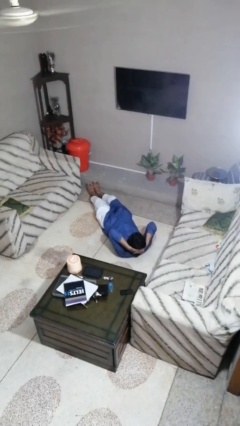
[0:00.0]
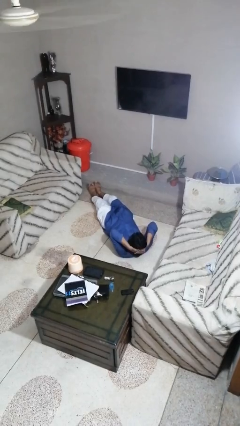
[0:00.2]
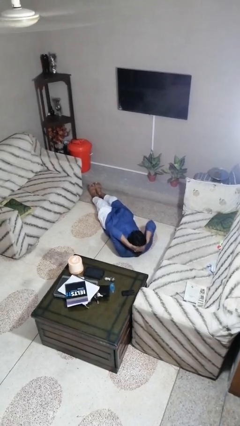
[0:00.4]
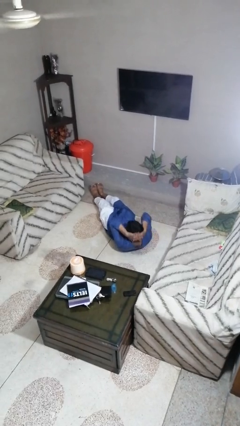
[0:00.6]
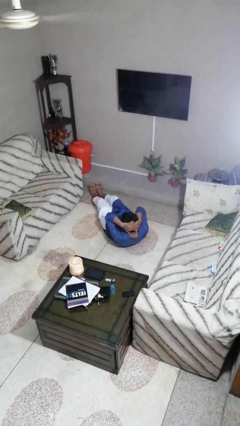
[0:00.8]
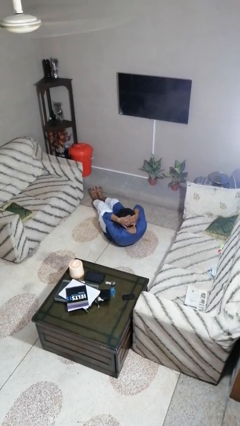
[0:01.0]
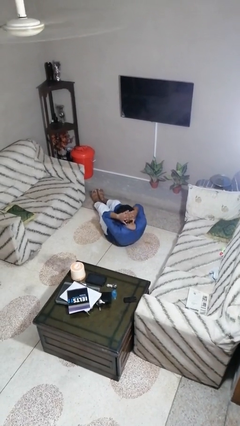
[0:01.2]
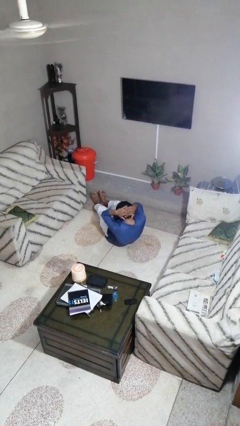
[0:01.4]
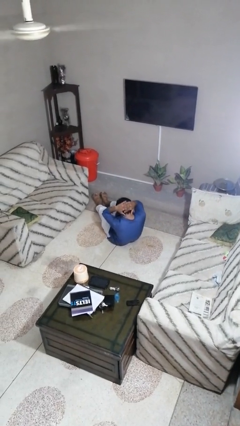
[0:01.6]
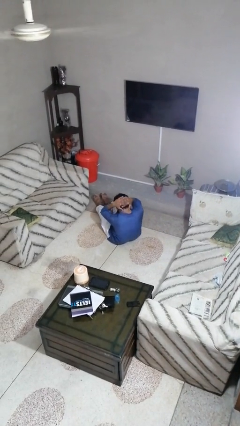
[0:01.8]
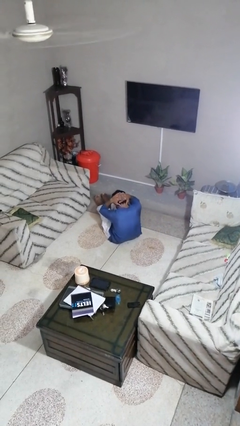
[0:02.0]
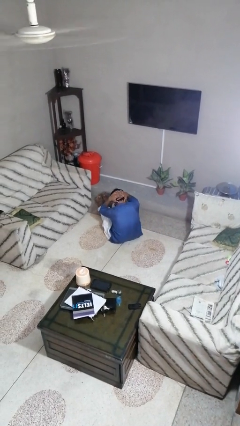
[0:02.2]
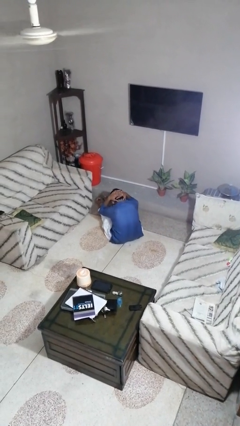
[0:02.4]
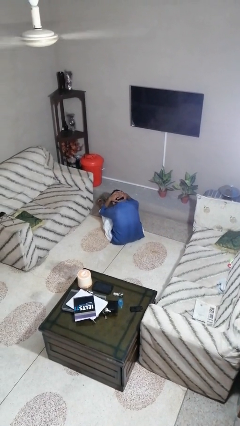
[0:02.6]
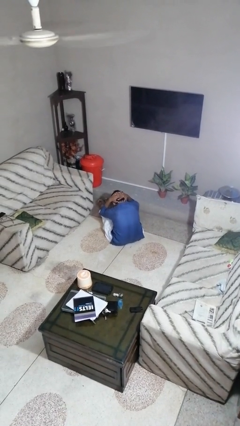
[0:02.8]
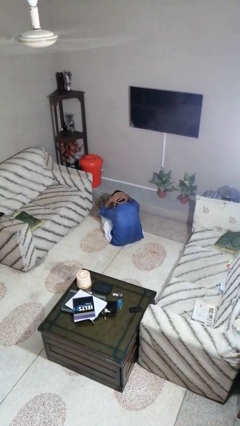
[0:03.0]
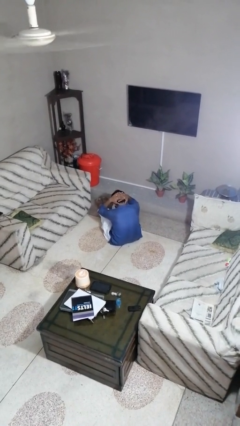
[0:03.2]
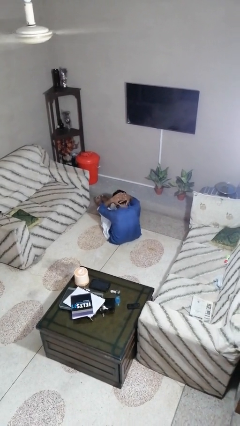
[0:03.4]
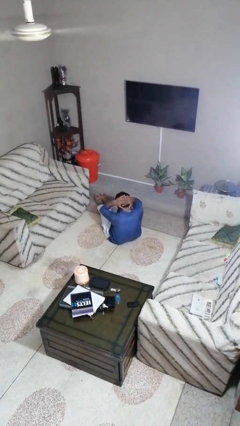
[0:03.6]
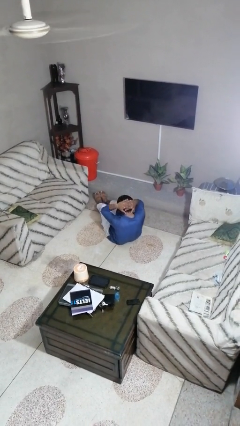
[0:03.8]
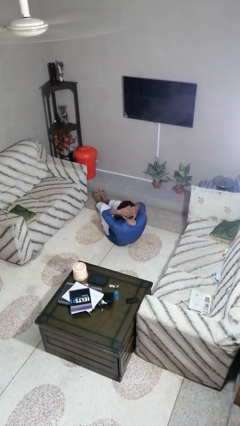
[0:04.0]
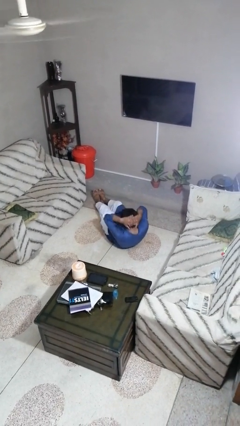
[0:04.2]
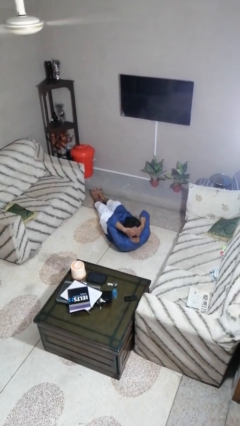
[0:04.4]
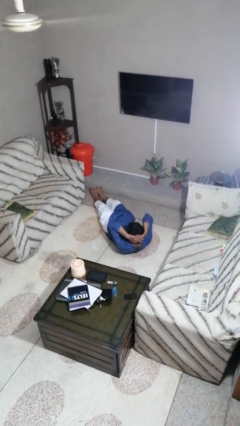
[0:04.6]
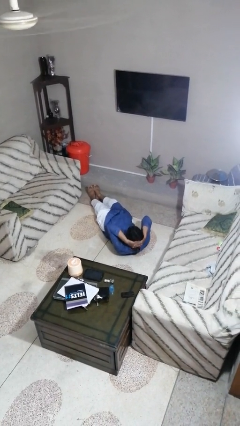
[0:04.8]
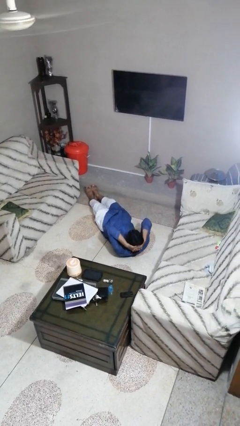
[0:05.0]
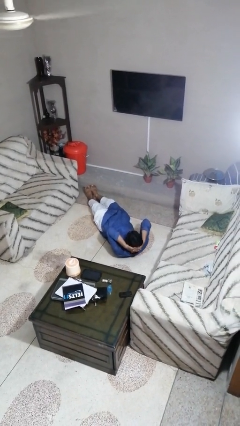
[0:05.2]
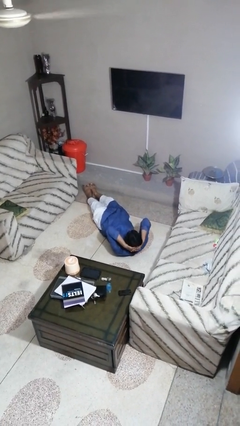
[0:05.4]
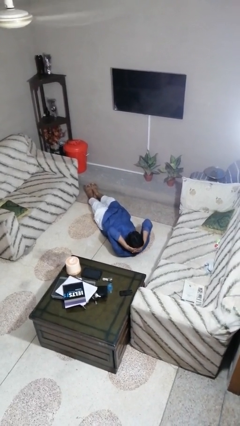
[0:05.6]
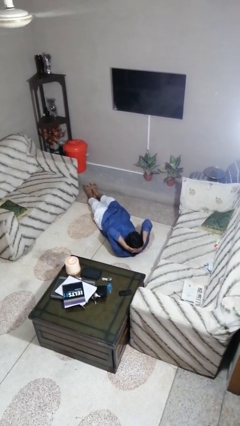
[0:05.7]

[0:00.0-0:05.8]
person exercises with situp

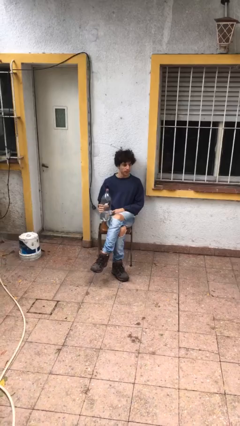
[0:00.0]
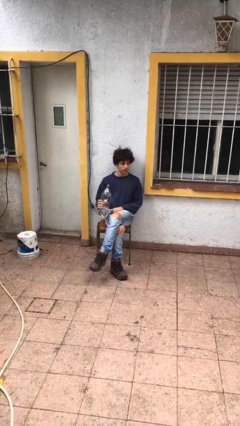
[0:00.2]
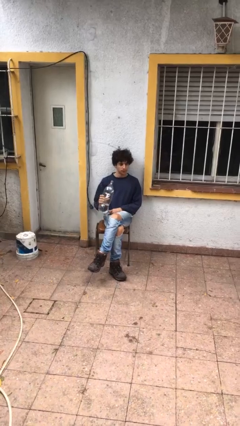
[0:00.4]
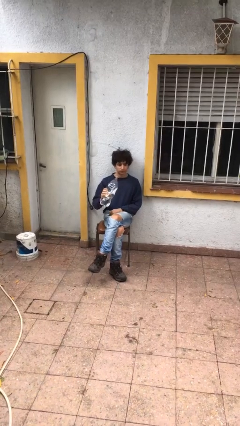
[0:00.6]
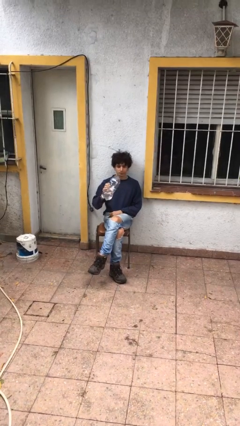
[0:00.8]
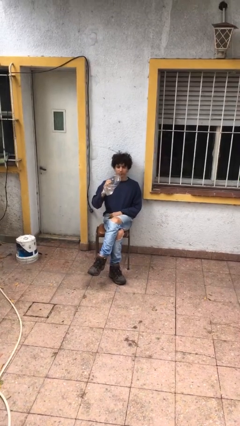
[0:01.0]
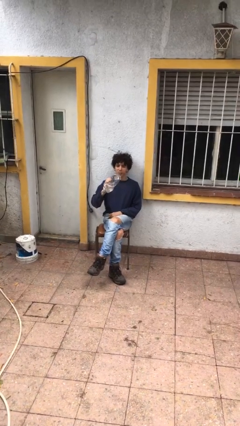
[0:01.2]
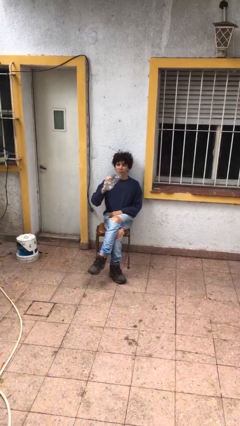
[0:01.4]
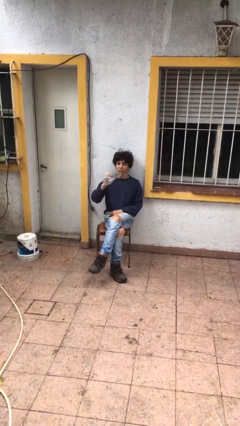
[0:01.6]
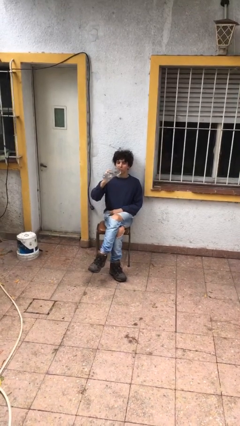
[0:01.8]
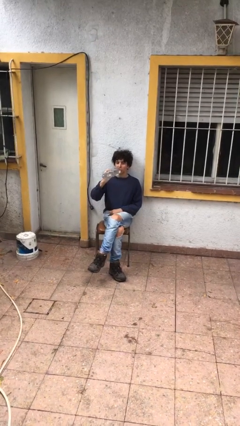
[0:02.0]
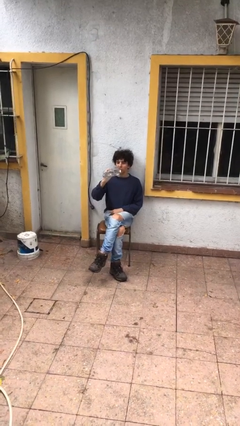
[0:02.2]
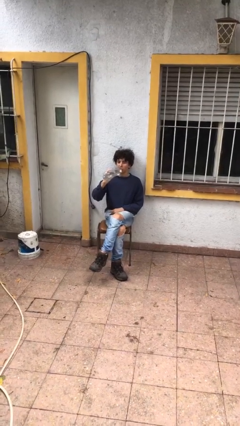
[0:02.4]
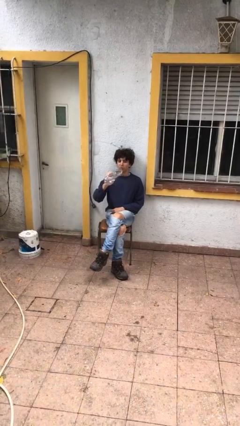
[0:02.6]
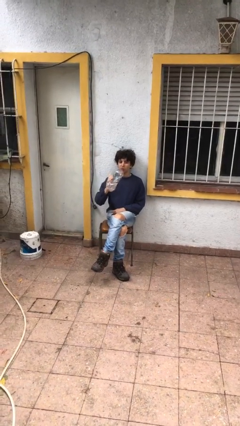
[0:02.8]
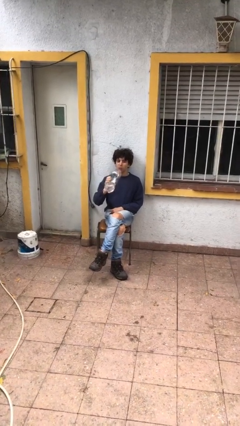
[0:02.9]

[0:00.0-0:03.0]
person drinks from bottle

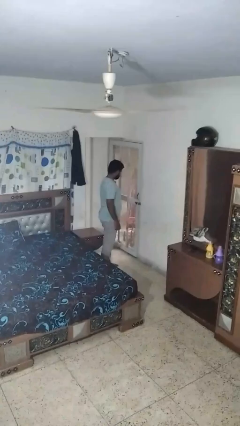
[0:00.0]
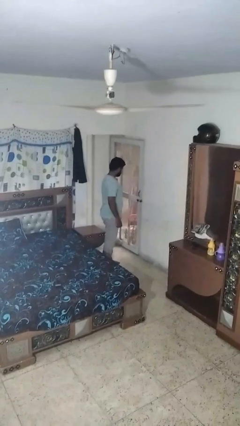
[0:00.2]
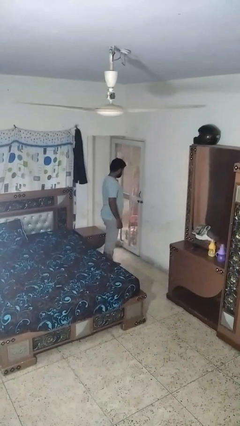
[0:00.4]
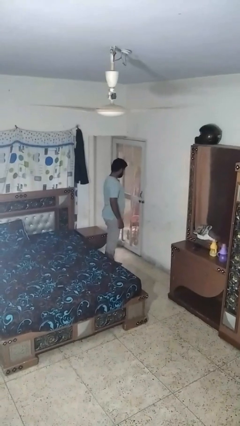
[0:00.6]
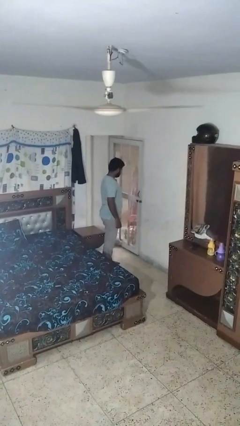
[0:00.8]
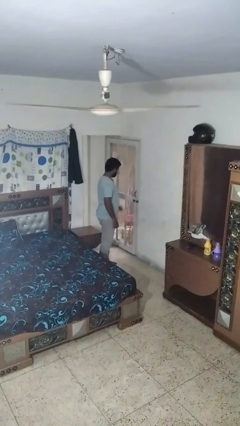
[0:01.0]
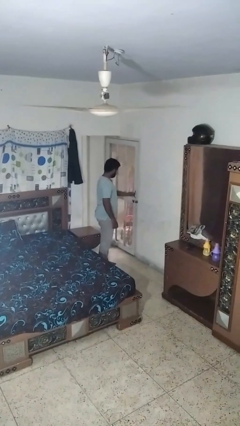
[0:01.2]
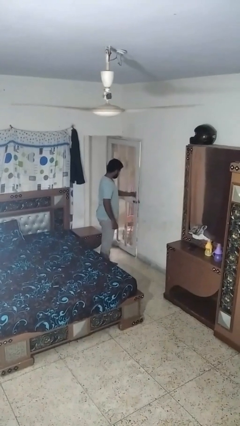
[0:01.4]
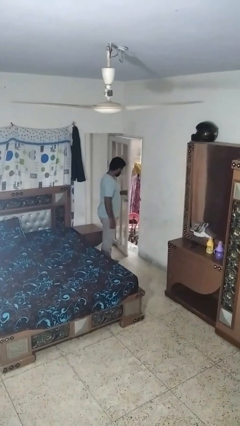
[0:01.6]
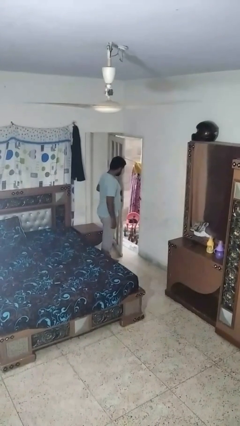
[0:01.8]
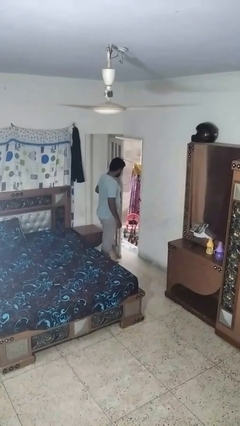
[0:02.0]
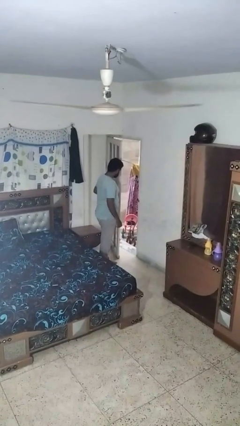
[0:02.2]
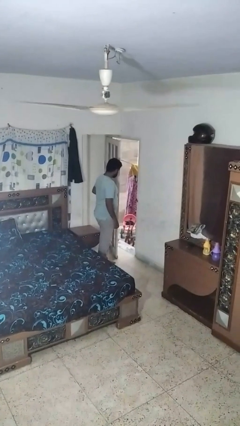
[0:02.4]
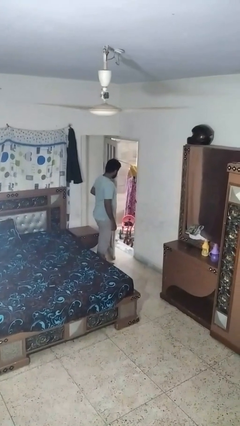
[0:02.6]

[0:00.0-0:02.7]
person opens facility door

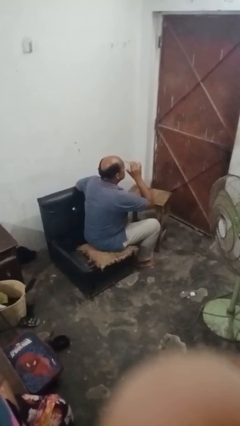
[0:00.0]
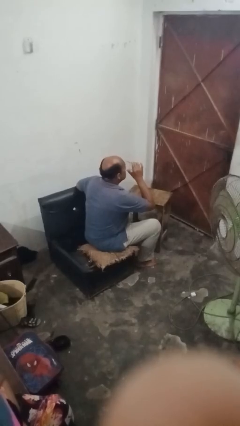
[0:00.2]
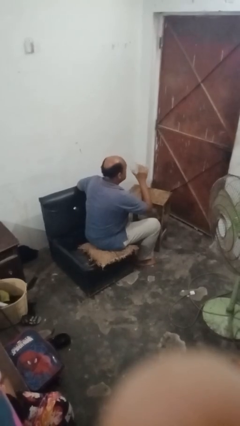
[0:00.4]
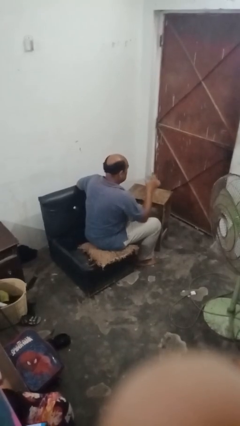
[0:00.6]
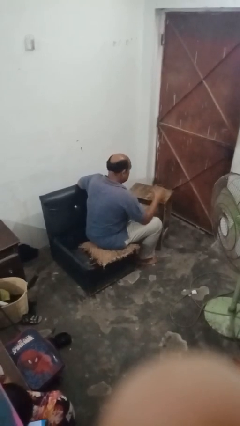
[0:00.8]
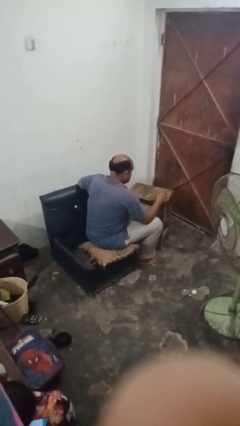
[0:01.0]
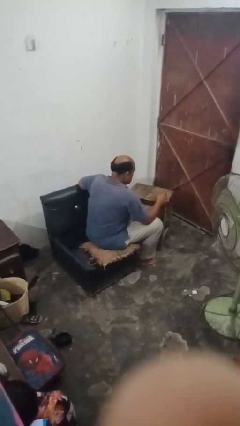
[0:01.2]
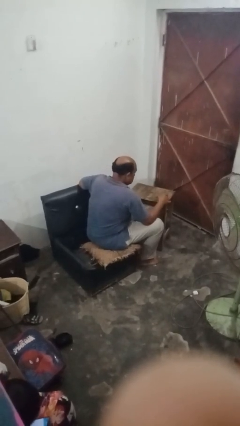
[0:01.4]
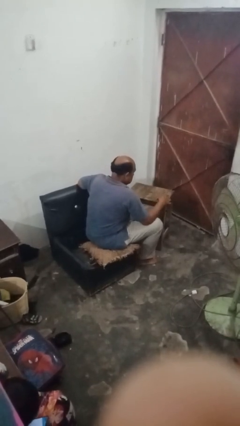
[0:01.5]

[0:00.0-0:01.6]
person puts down object on table

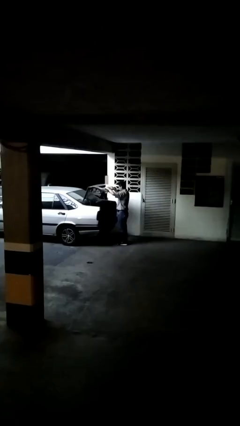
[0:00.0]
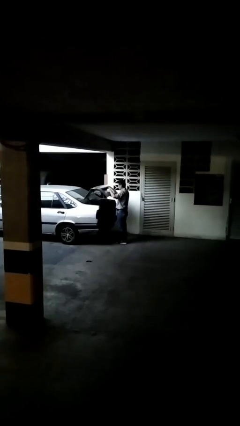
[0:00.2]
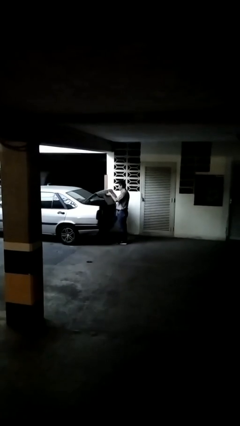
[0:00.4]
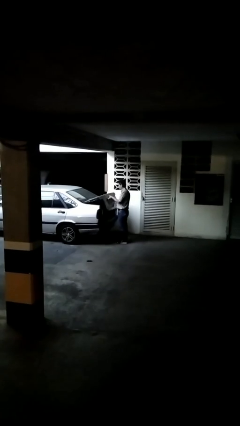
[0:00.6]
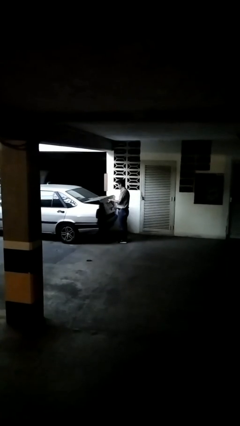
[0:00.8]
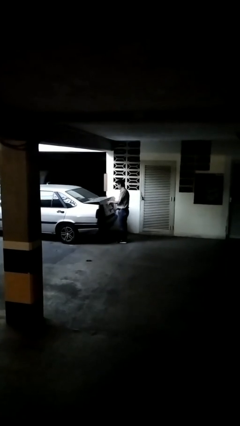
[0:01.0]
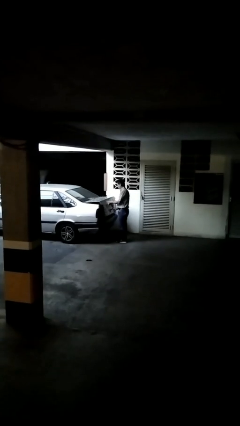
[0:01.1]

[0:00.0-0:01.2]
person closes car trunk

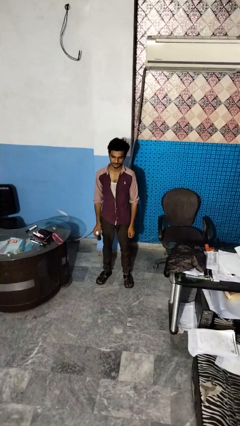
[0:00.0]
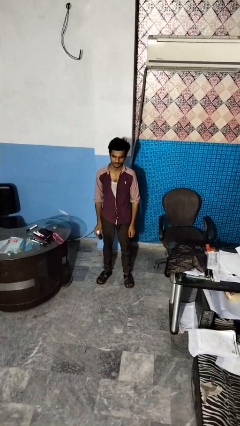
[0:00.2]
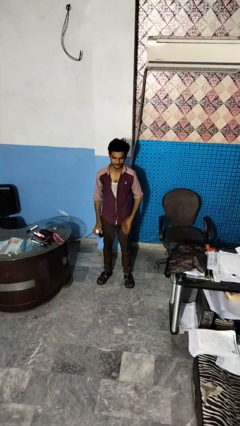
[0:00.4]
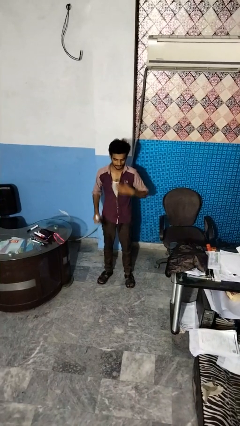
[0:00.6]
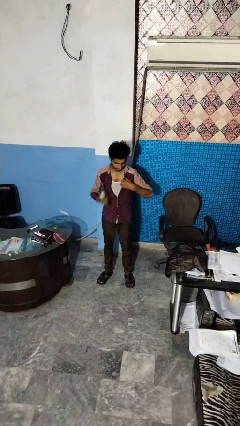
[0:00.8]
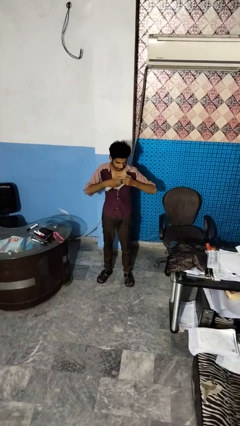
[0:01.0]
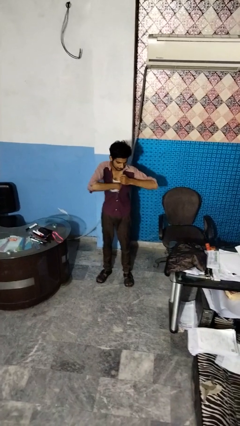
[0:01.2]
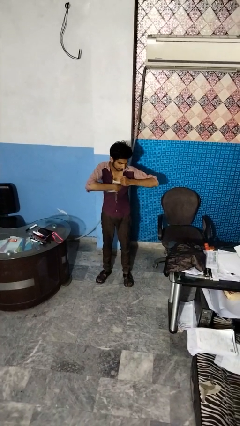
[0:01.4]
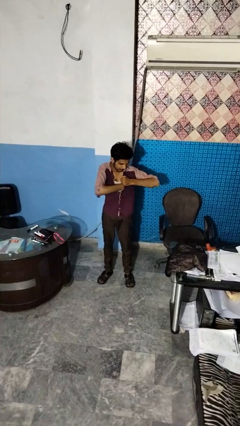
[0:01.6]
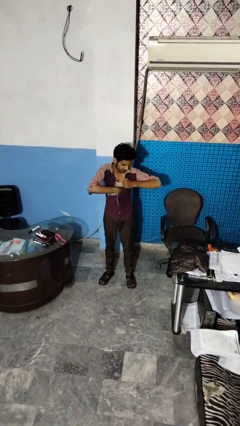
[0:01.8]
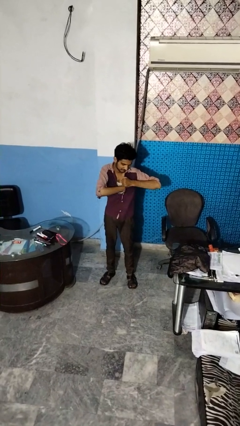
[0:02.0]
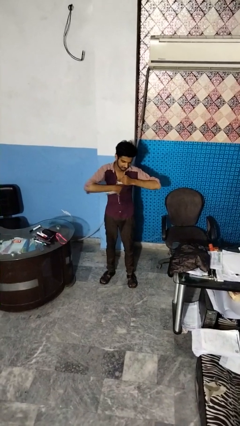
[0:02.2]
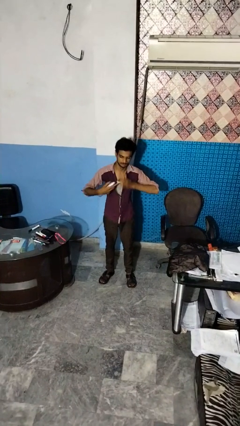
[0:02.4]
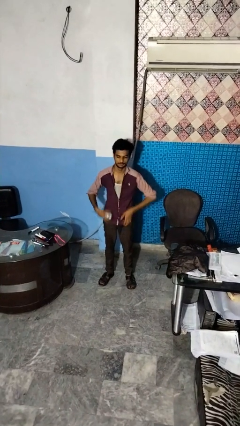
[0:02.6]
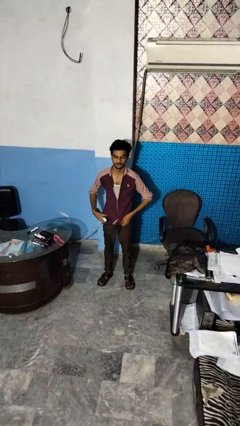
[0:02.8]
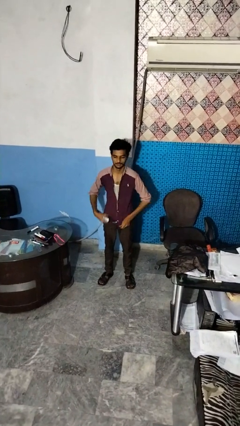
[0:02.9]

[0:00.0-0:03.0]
person applies deodorant

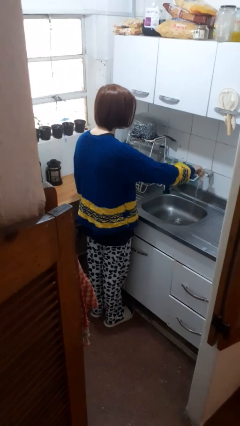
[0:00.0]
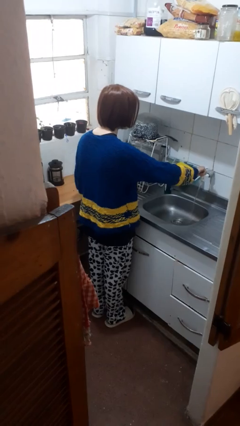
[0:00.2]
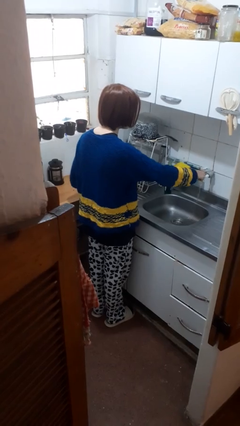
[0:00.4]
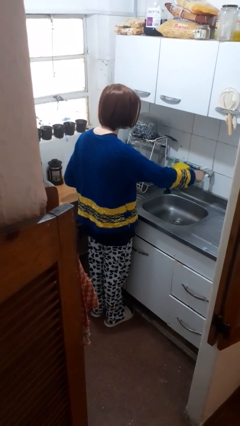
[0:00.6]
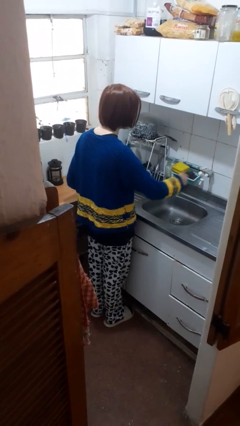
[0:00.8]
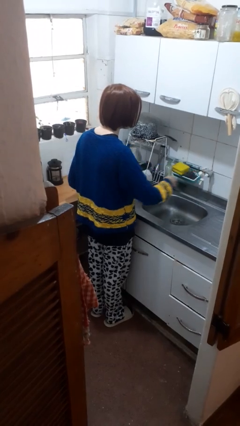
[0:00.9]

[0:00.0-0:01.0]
person turns off faucet
